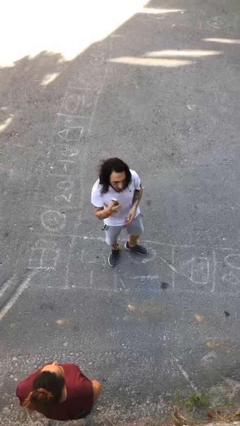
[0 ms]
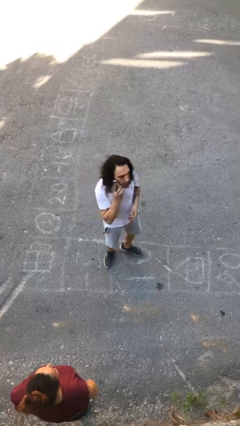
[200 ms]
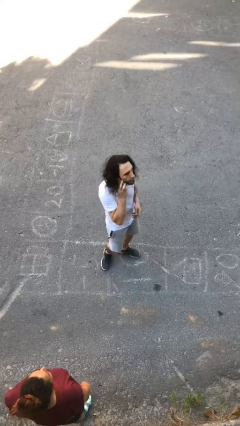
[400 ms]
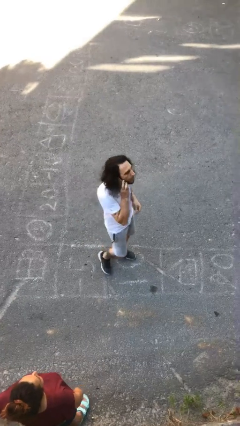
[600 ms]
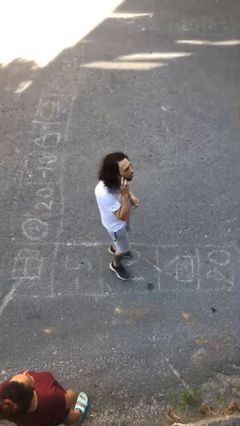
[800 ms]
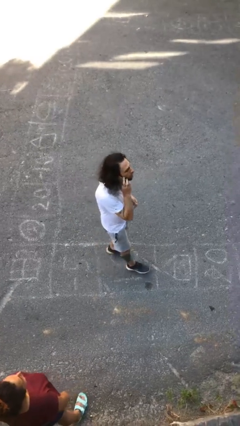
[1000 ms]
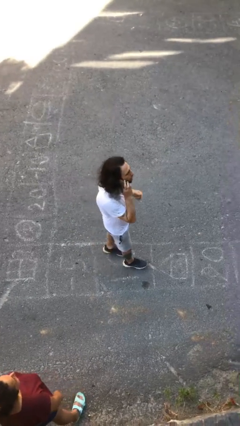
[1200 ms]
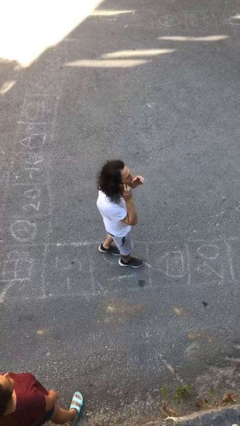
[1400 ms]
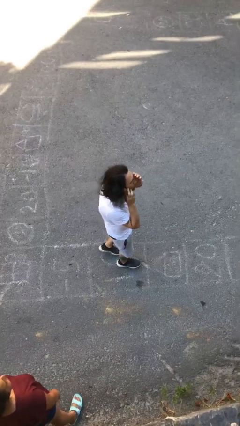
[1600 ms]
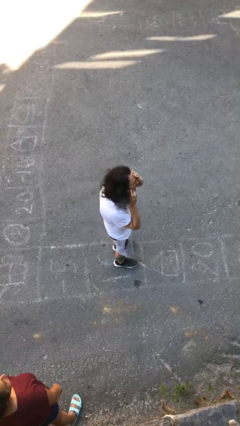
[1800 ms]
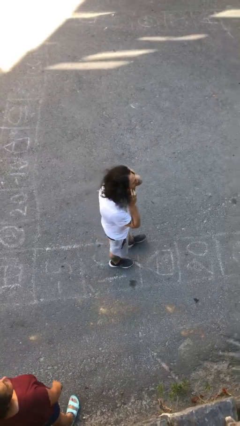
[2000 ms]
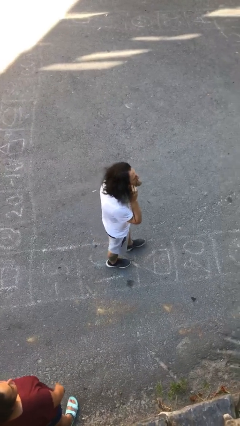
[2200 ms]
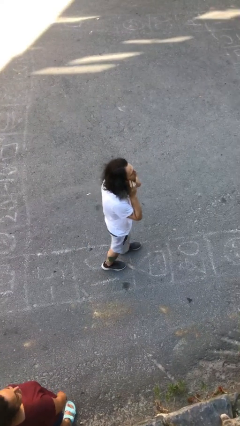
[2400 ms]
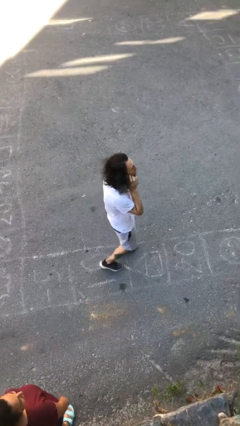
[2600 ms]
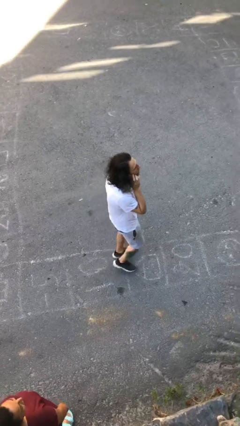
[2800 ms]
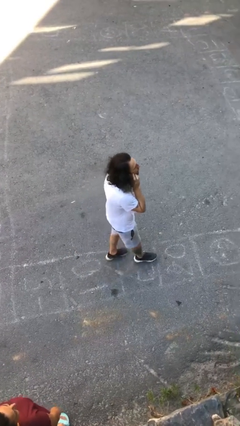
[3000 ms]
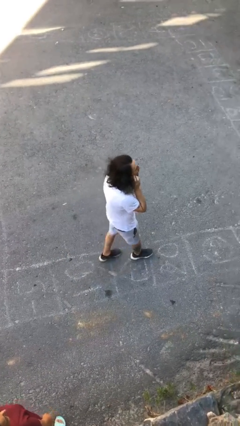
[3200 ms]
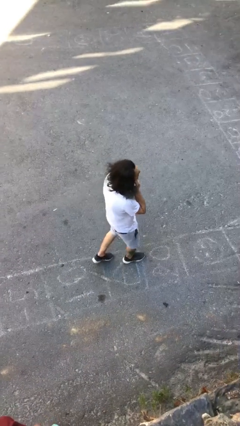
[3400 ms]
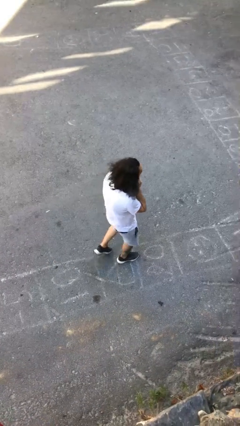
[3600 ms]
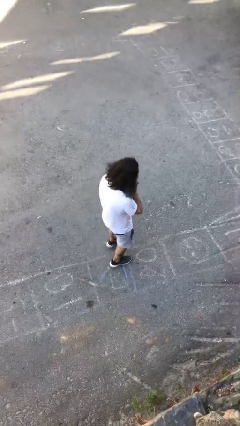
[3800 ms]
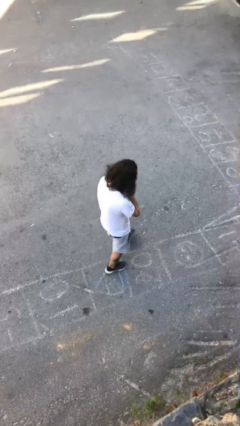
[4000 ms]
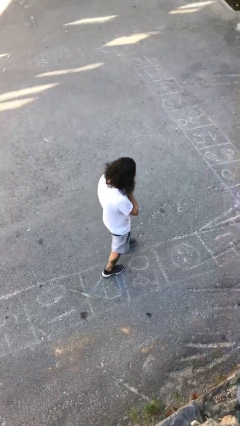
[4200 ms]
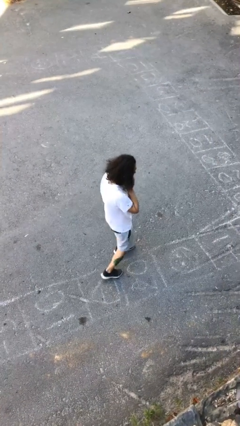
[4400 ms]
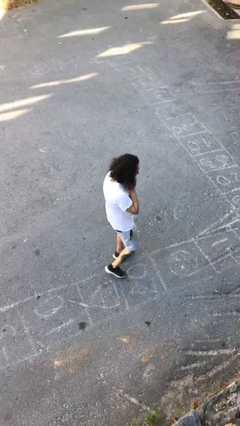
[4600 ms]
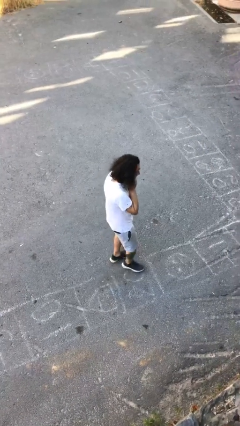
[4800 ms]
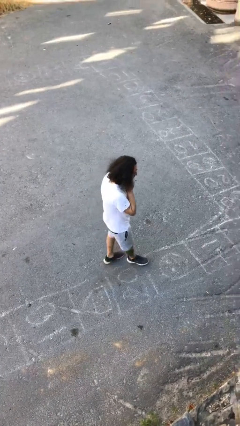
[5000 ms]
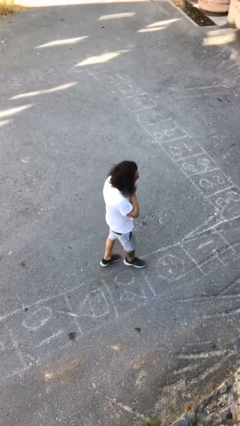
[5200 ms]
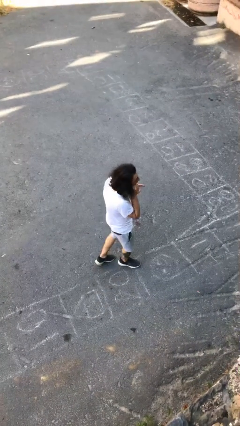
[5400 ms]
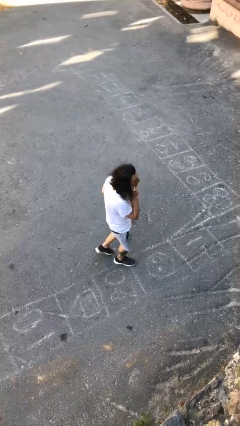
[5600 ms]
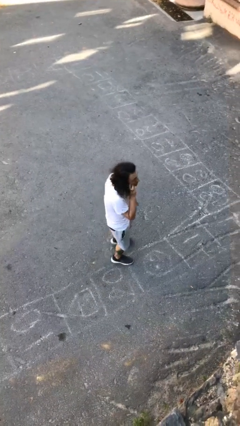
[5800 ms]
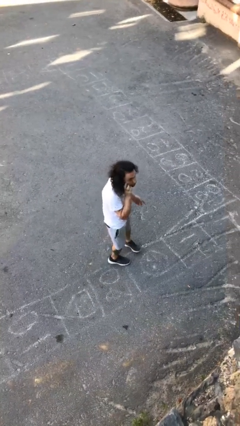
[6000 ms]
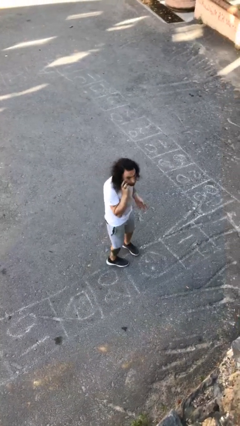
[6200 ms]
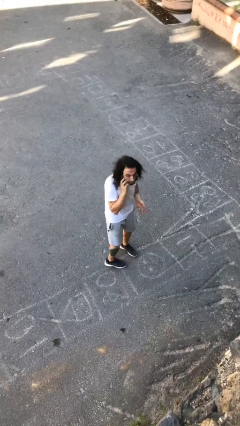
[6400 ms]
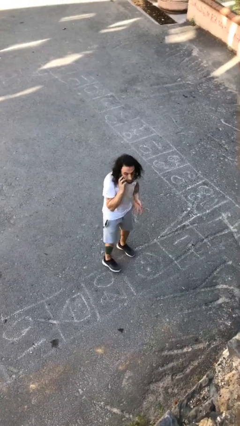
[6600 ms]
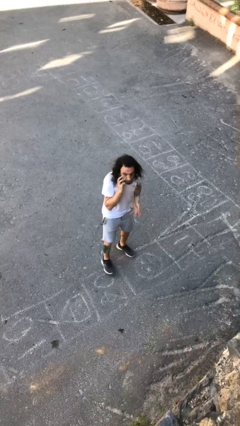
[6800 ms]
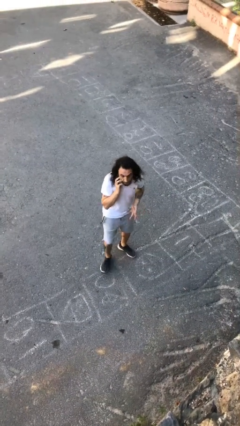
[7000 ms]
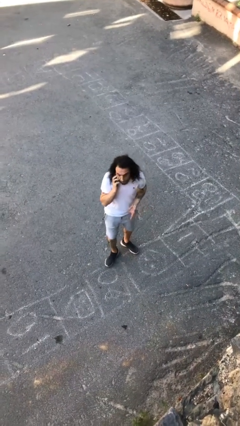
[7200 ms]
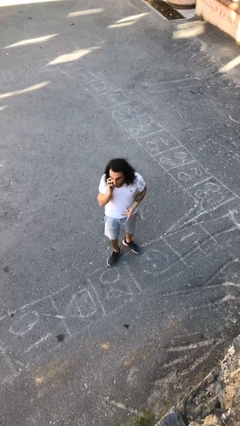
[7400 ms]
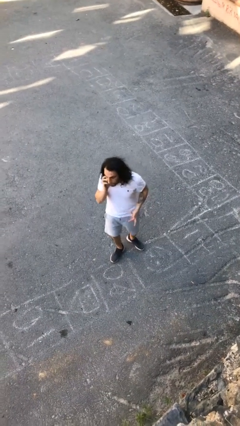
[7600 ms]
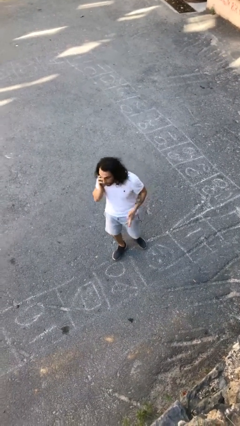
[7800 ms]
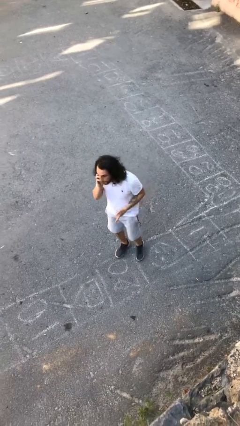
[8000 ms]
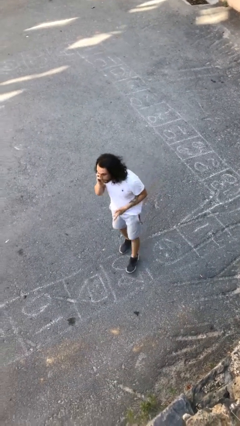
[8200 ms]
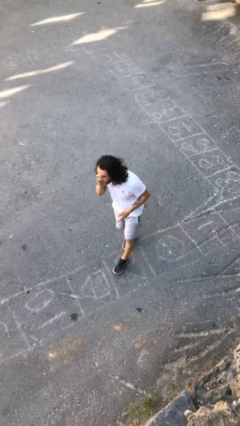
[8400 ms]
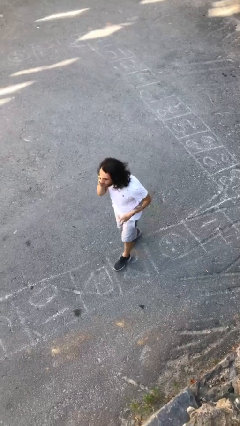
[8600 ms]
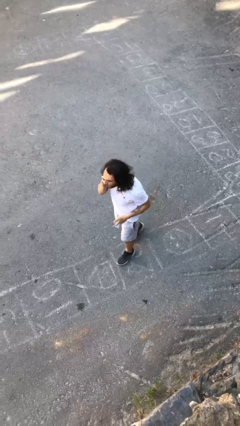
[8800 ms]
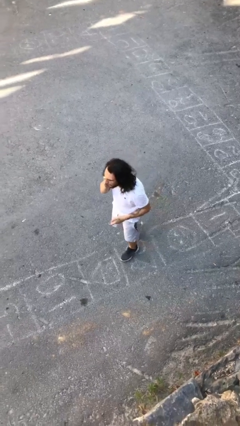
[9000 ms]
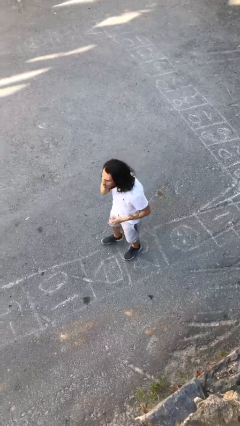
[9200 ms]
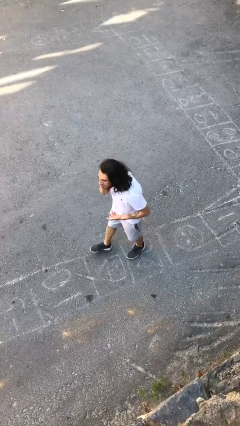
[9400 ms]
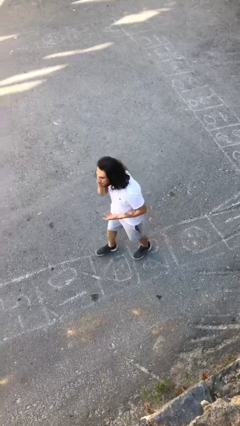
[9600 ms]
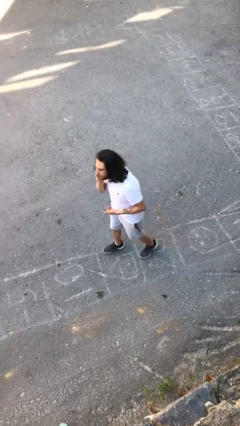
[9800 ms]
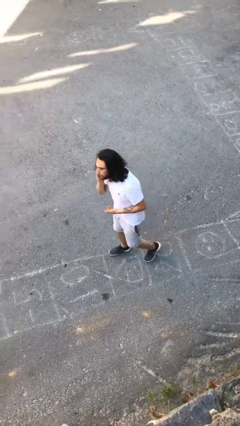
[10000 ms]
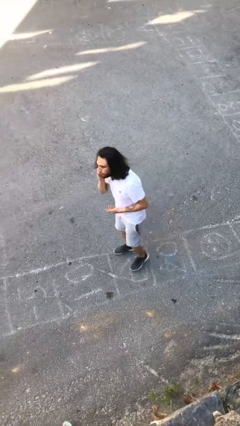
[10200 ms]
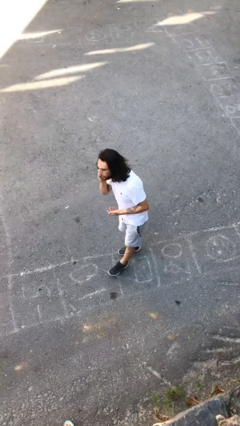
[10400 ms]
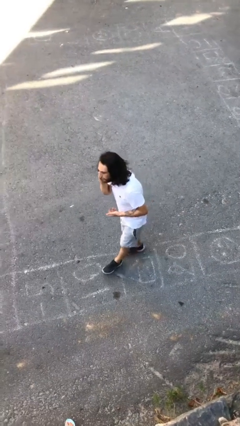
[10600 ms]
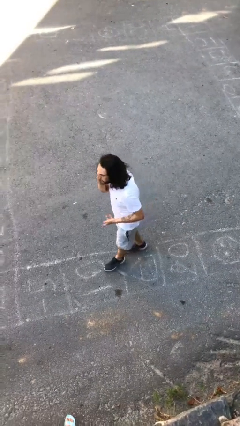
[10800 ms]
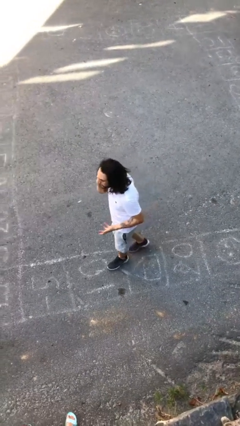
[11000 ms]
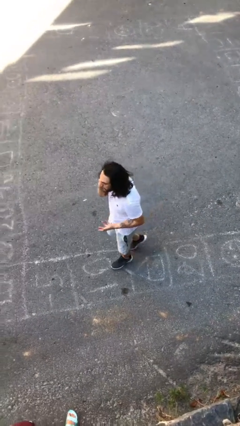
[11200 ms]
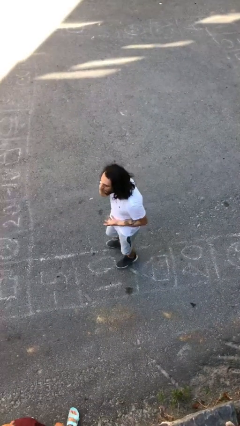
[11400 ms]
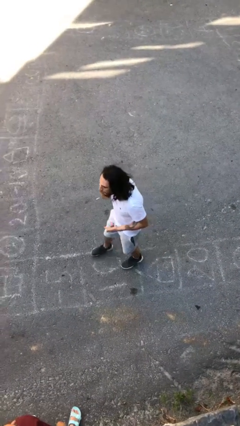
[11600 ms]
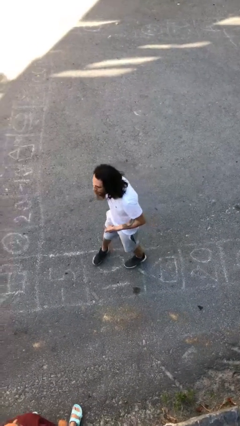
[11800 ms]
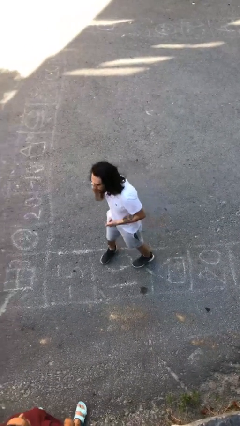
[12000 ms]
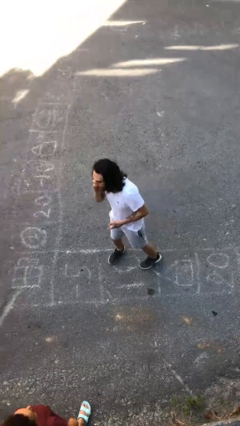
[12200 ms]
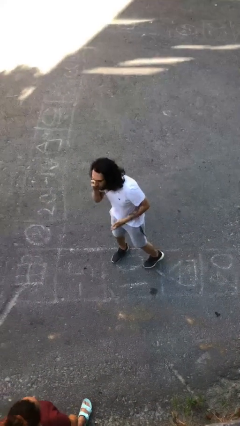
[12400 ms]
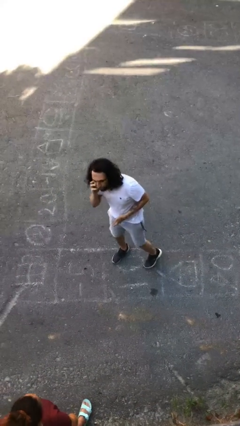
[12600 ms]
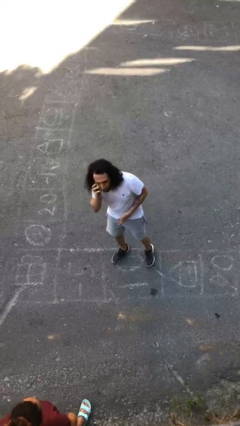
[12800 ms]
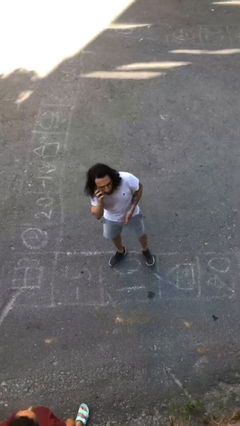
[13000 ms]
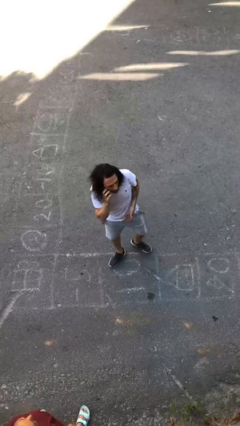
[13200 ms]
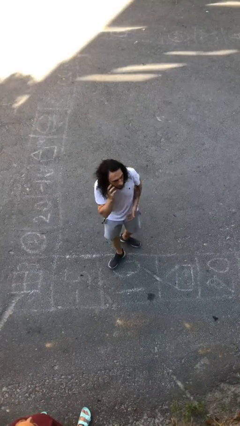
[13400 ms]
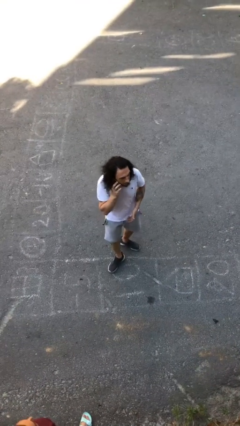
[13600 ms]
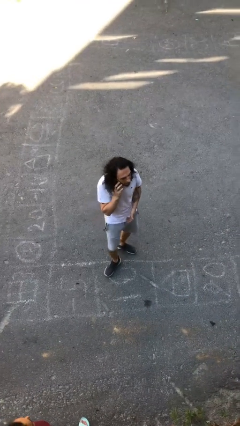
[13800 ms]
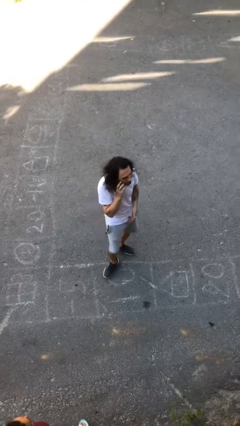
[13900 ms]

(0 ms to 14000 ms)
person talks on phone

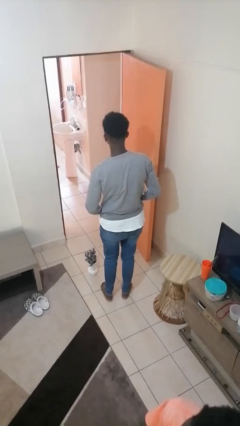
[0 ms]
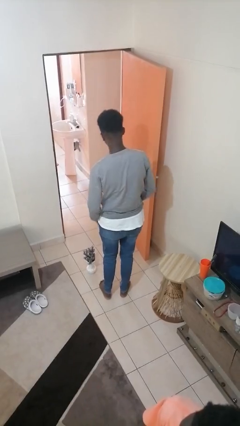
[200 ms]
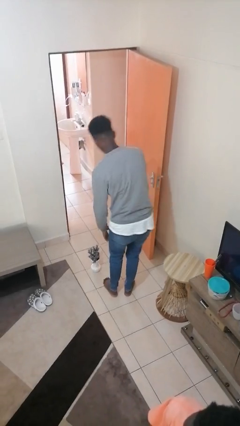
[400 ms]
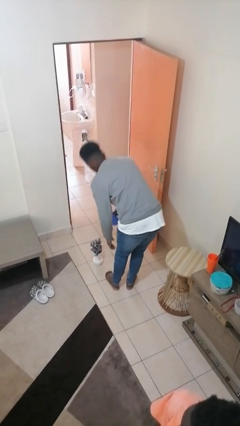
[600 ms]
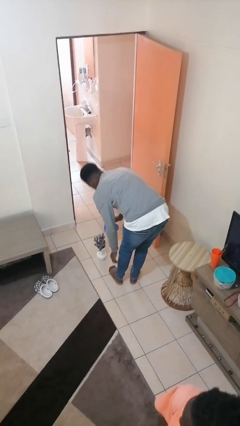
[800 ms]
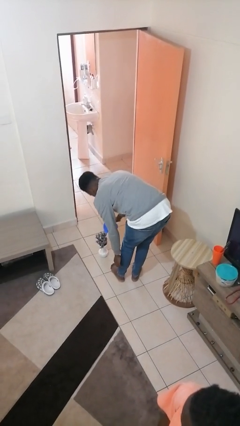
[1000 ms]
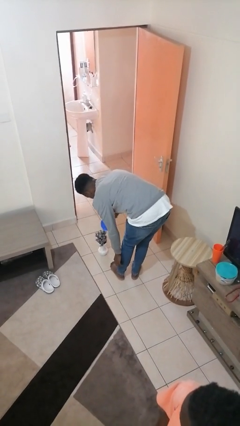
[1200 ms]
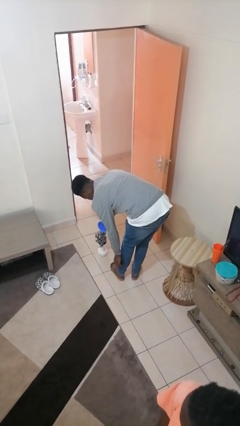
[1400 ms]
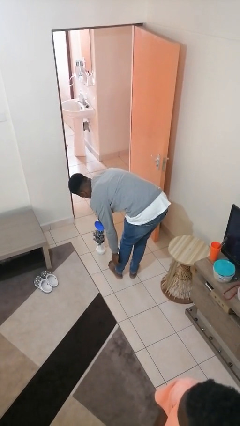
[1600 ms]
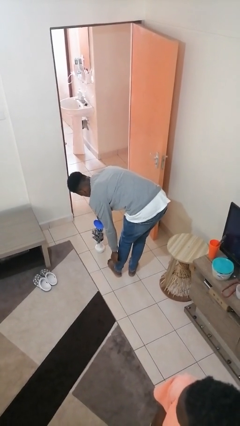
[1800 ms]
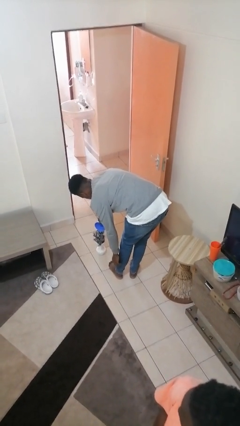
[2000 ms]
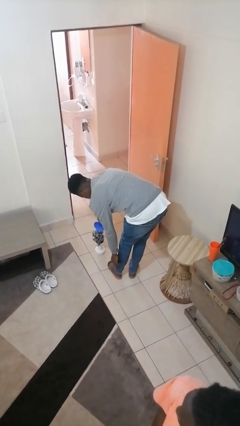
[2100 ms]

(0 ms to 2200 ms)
person waters houseplant

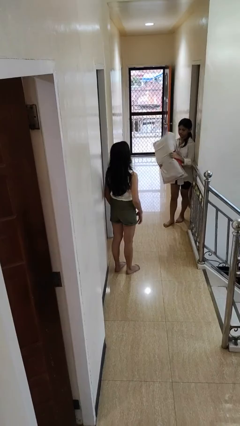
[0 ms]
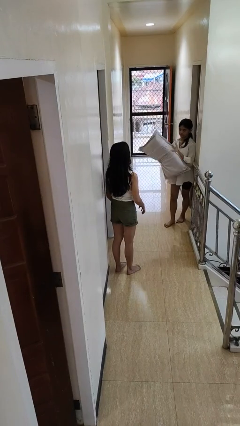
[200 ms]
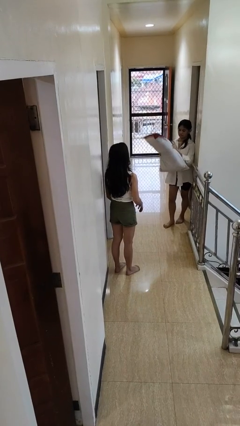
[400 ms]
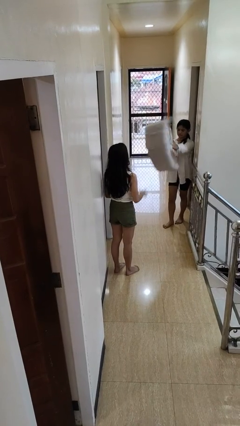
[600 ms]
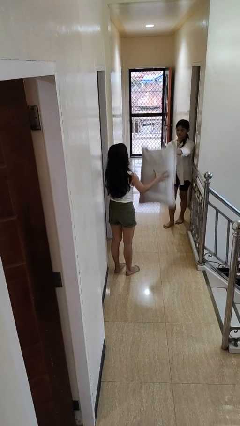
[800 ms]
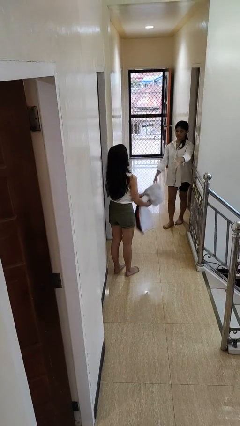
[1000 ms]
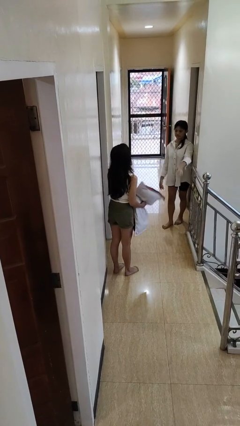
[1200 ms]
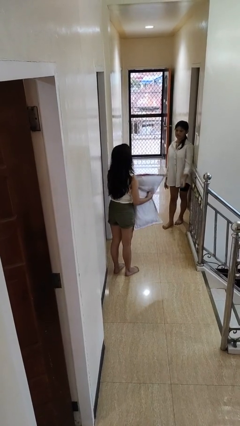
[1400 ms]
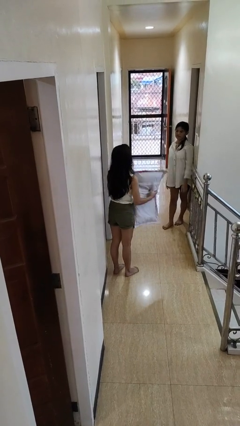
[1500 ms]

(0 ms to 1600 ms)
person catches object from person
